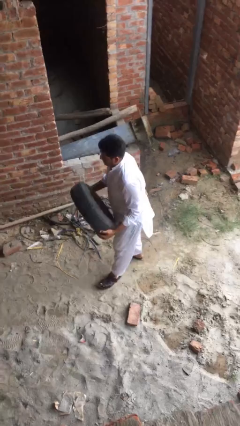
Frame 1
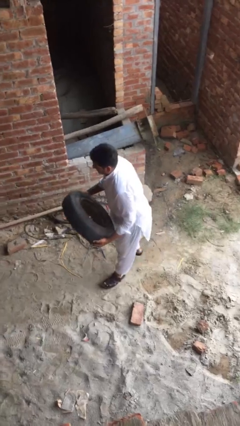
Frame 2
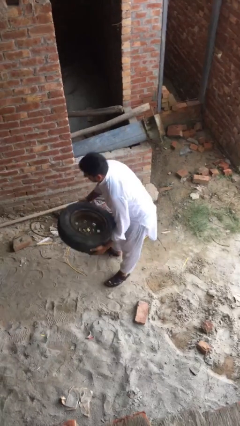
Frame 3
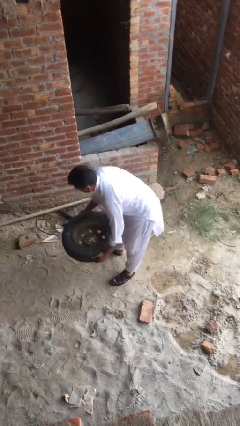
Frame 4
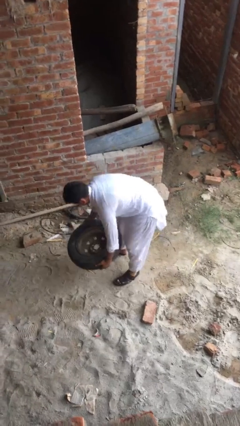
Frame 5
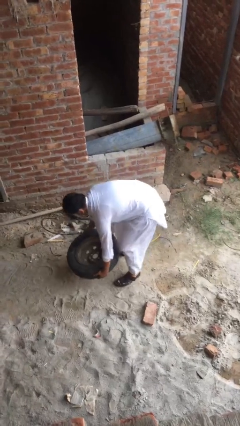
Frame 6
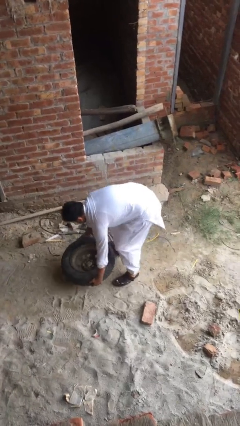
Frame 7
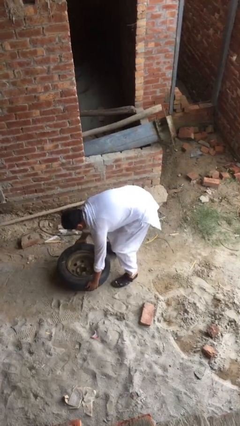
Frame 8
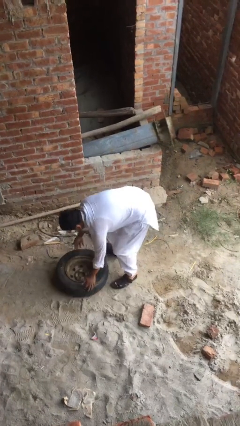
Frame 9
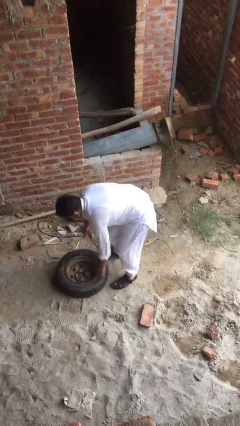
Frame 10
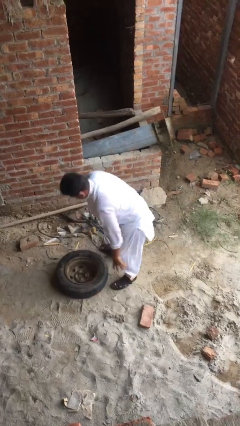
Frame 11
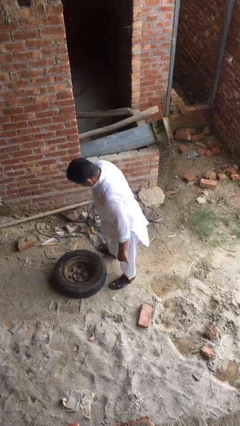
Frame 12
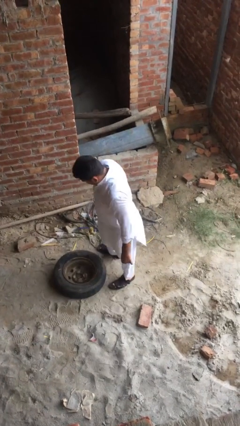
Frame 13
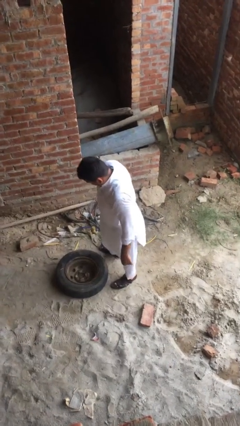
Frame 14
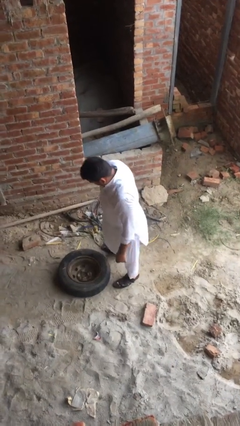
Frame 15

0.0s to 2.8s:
person puts down object on floor

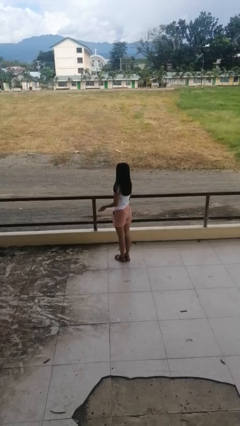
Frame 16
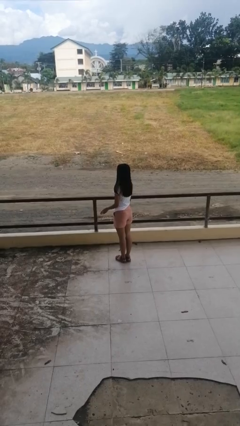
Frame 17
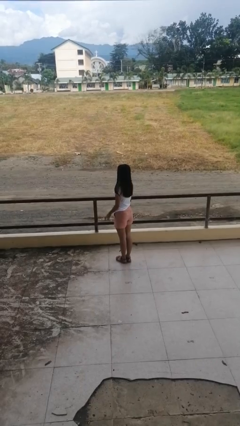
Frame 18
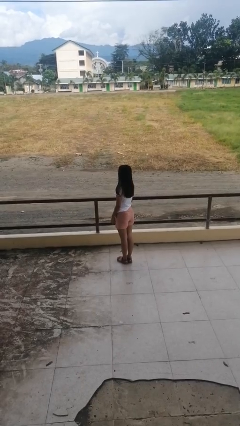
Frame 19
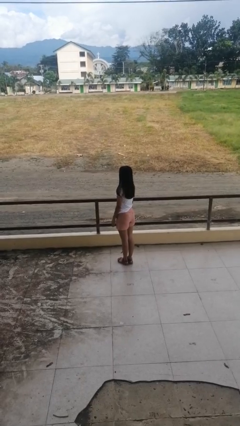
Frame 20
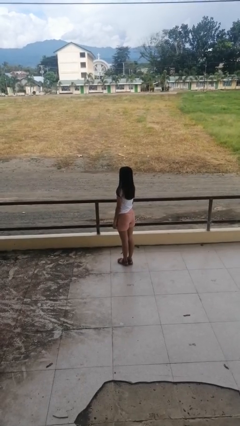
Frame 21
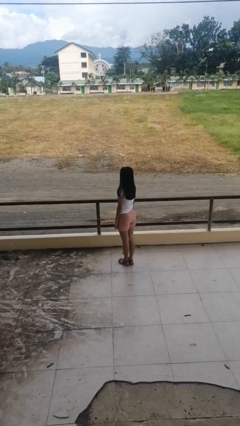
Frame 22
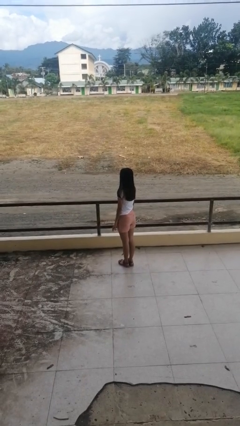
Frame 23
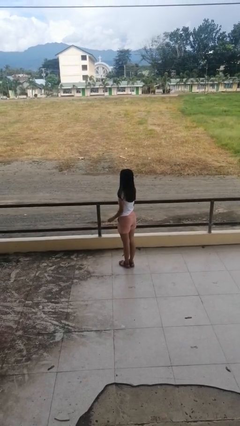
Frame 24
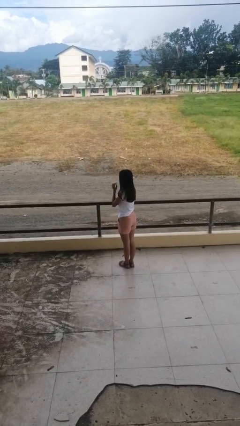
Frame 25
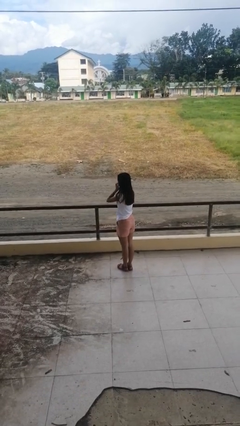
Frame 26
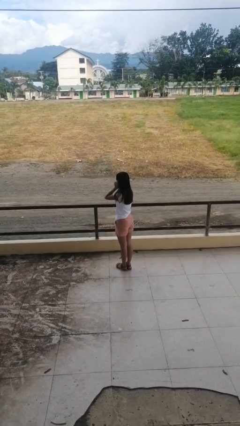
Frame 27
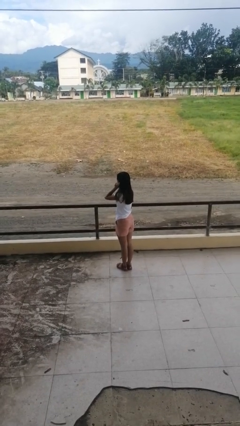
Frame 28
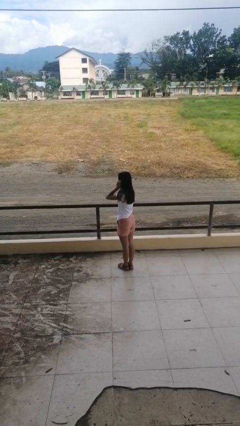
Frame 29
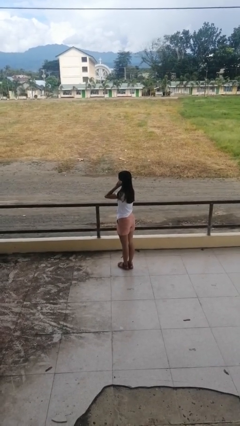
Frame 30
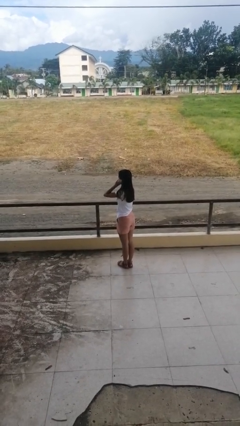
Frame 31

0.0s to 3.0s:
person touches earlobe

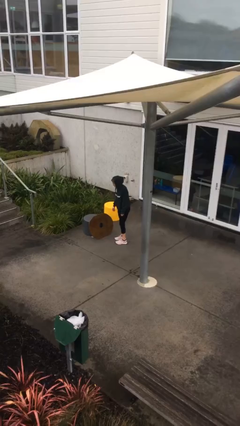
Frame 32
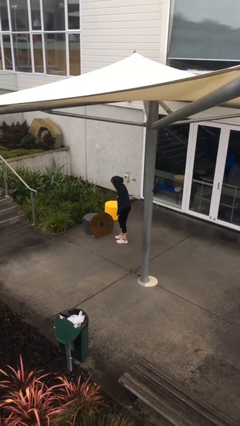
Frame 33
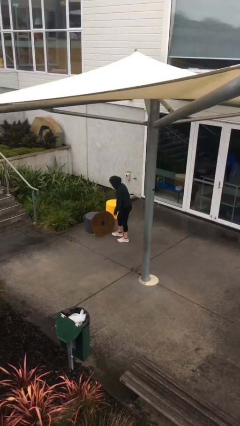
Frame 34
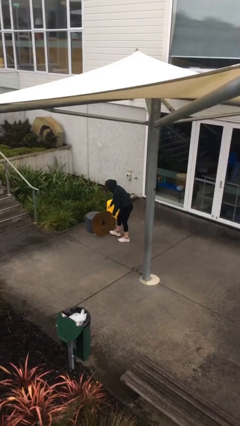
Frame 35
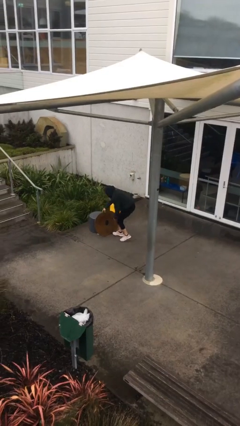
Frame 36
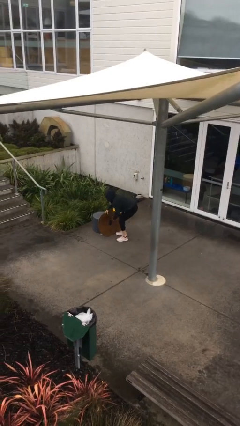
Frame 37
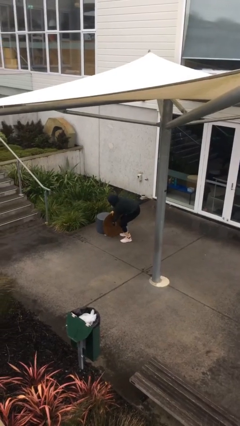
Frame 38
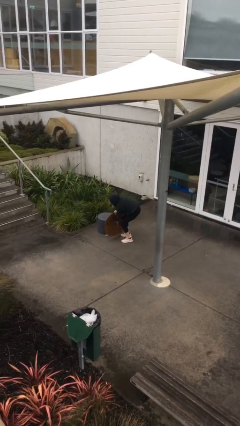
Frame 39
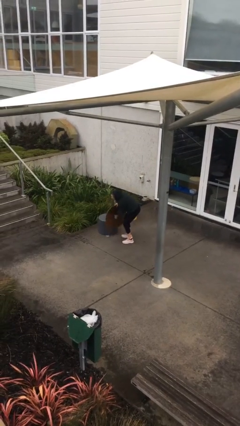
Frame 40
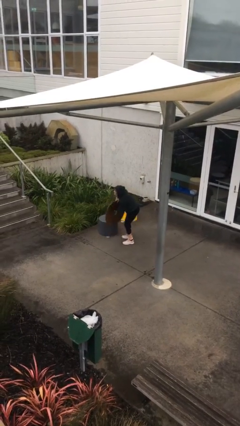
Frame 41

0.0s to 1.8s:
person picks up object from floor

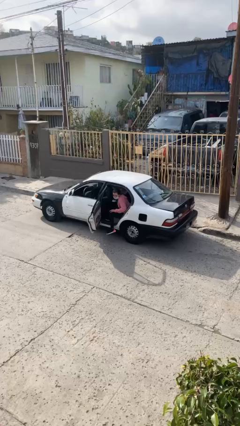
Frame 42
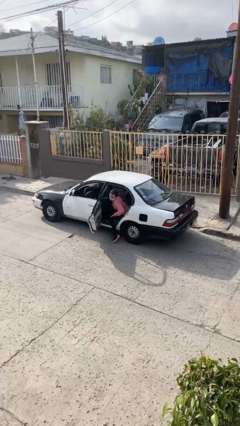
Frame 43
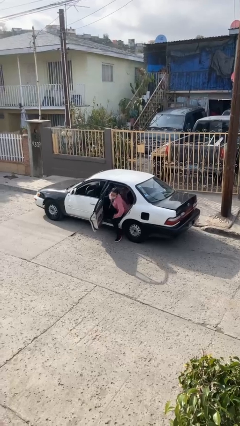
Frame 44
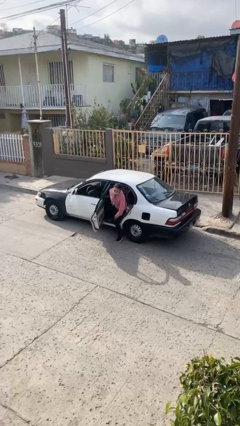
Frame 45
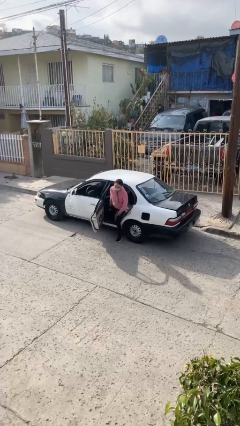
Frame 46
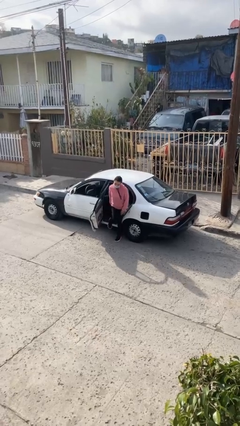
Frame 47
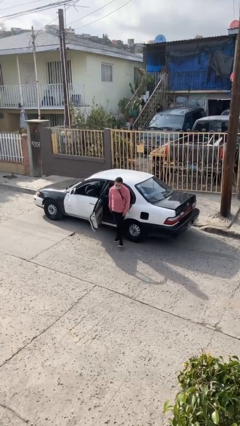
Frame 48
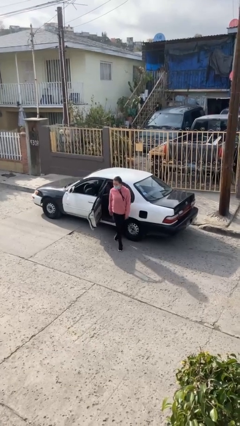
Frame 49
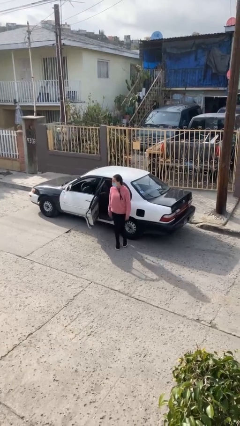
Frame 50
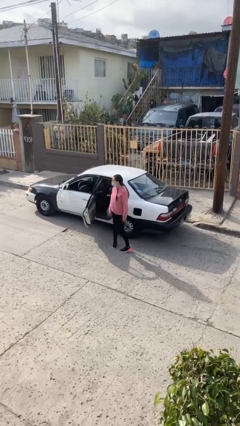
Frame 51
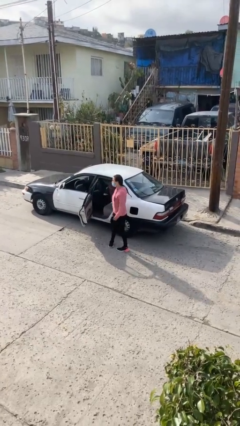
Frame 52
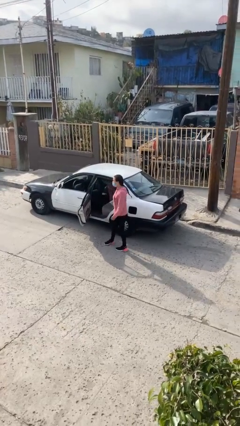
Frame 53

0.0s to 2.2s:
person exits car

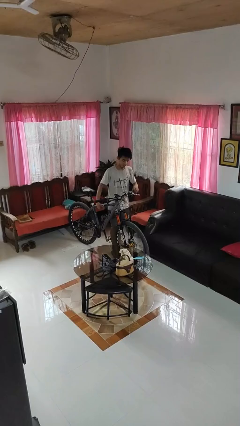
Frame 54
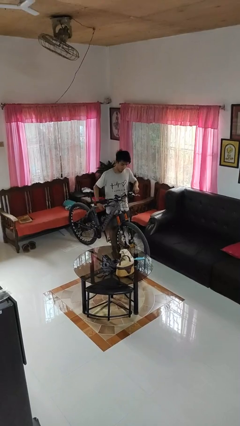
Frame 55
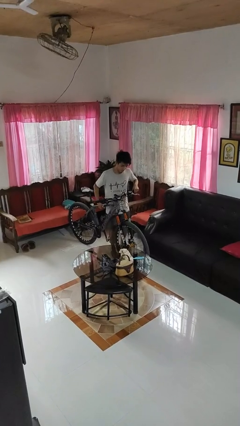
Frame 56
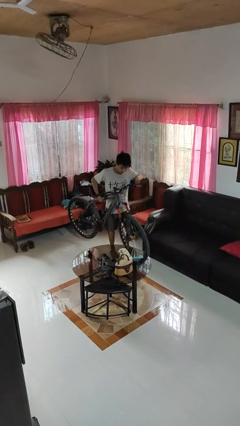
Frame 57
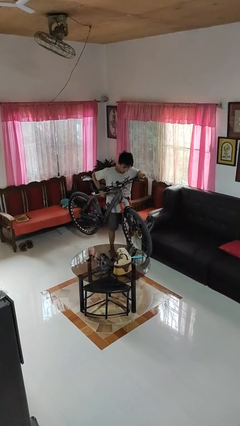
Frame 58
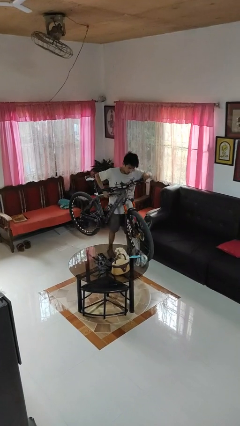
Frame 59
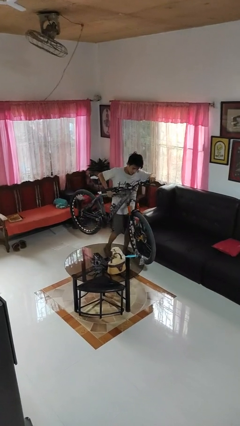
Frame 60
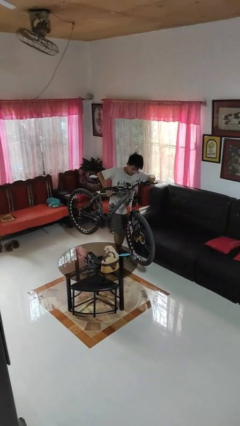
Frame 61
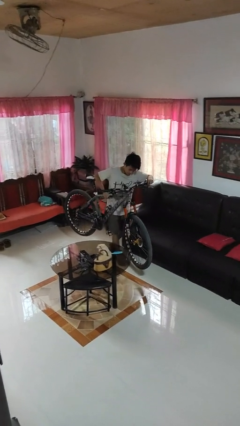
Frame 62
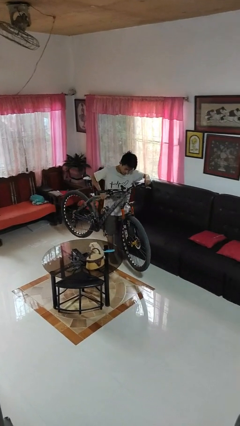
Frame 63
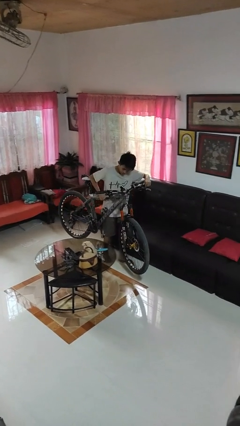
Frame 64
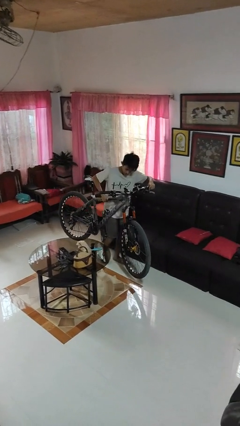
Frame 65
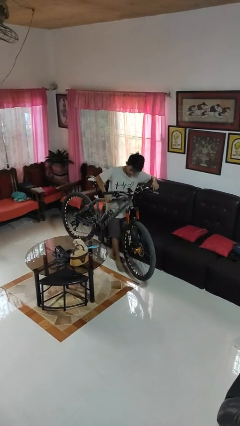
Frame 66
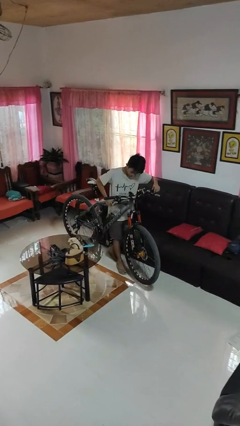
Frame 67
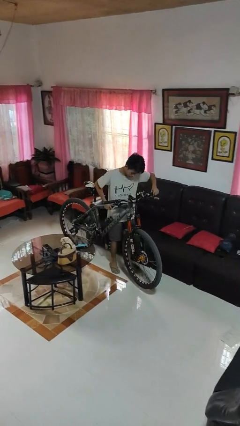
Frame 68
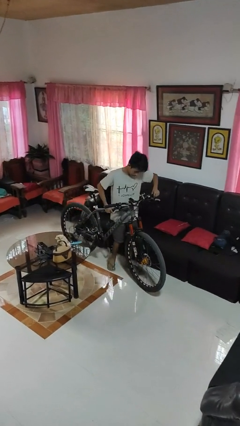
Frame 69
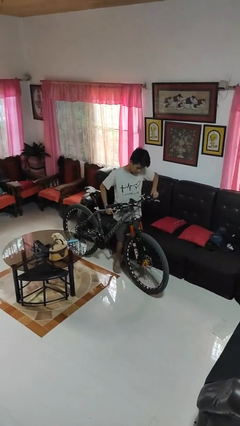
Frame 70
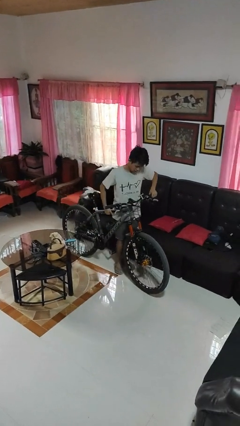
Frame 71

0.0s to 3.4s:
person carries bicycle

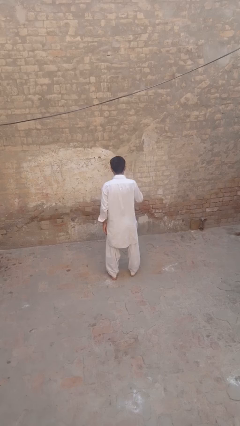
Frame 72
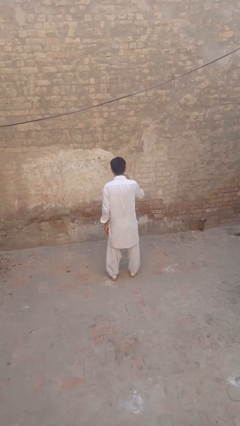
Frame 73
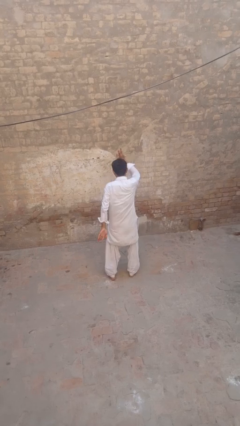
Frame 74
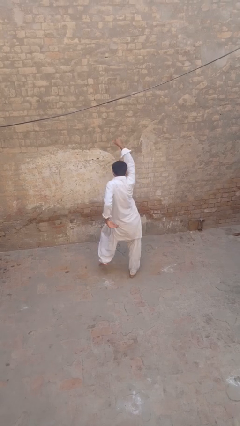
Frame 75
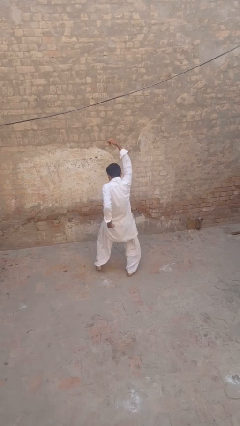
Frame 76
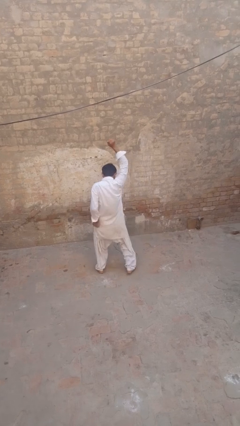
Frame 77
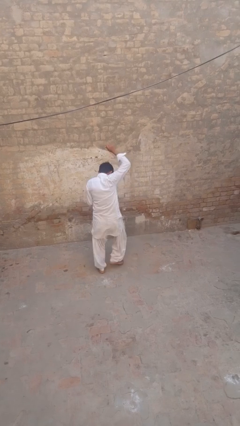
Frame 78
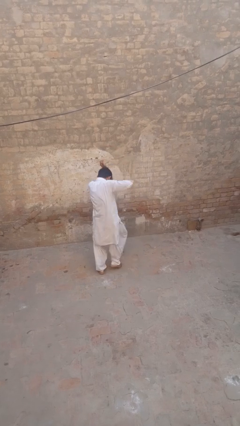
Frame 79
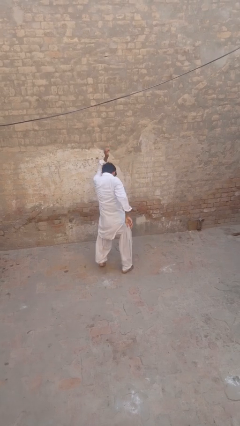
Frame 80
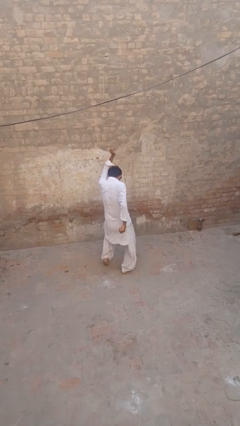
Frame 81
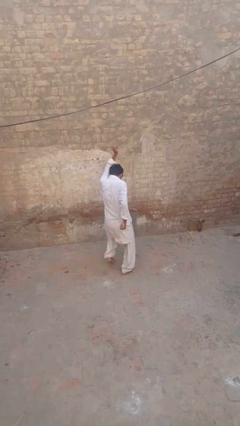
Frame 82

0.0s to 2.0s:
person dances in place

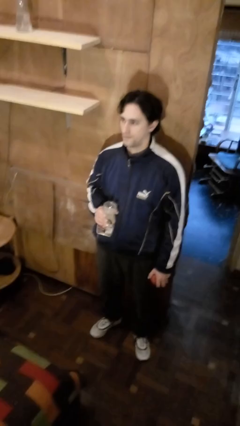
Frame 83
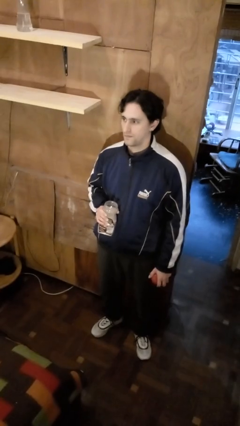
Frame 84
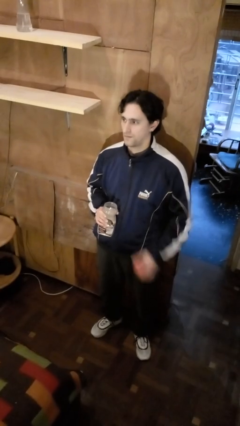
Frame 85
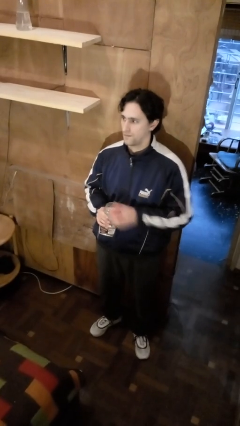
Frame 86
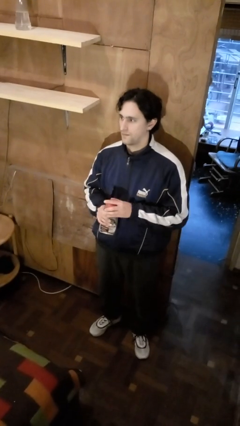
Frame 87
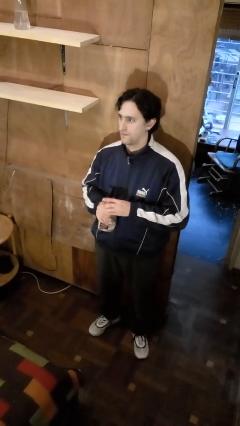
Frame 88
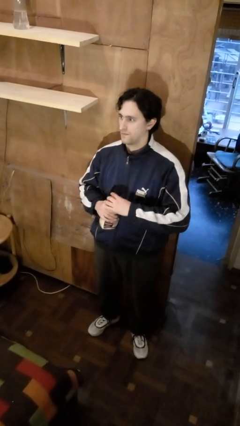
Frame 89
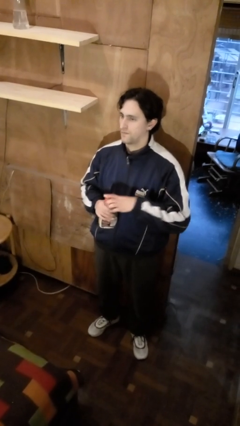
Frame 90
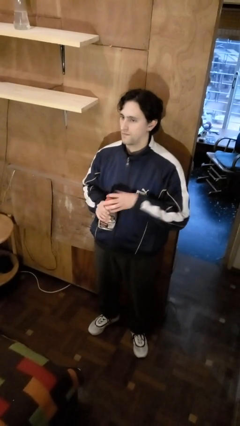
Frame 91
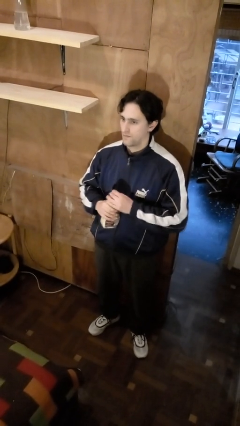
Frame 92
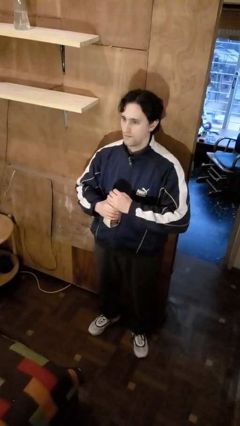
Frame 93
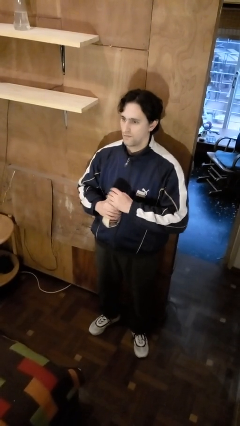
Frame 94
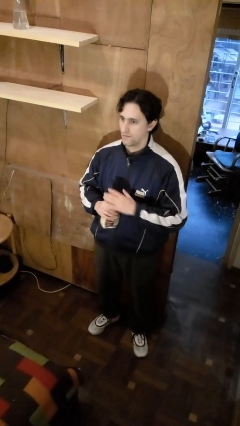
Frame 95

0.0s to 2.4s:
person closes jar
